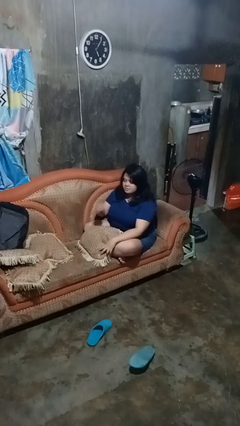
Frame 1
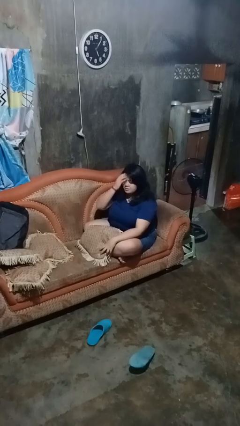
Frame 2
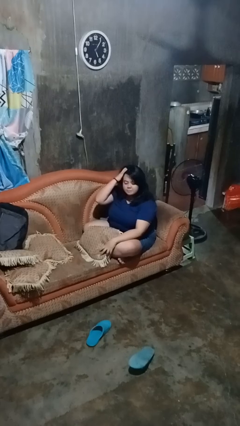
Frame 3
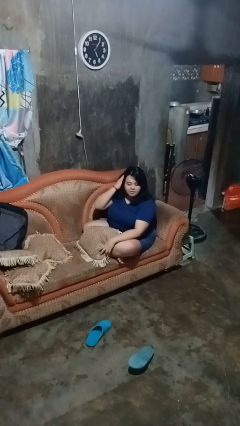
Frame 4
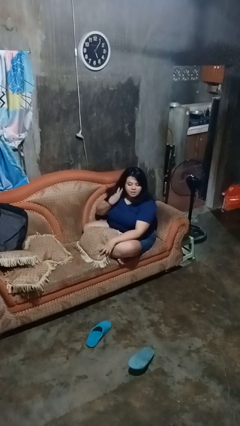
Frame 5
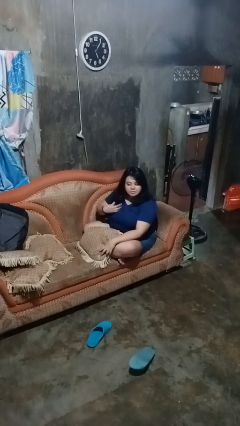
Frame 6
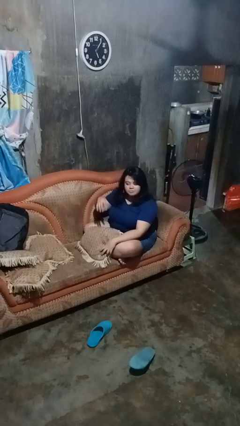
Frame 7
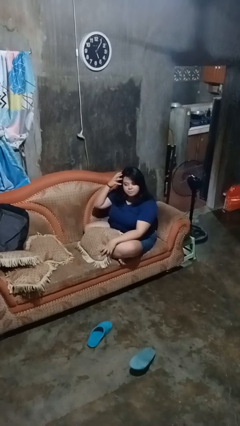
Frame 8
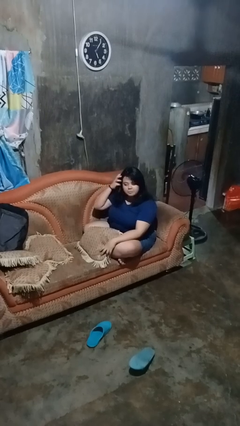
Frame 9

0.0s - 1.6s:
person strokes hair

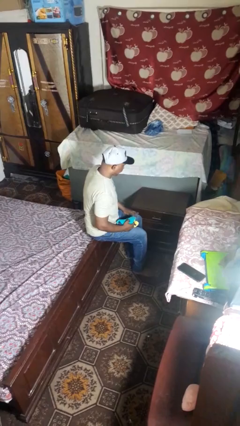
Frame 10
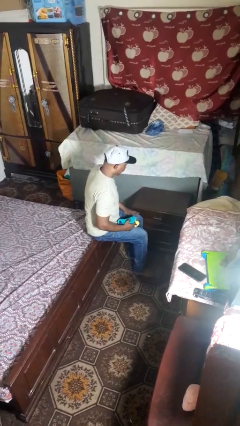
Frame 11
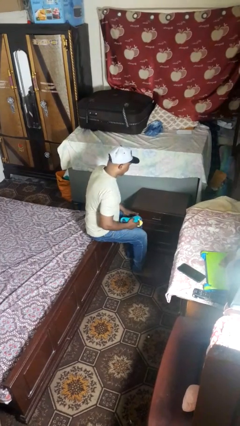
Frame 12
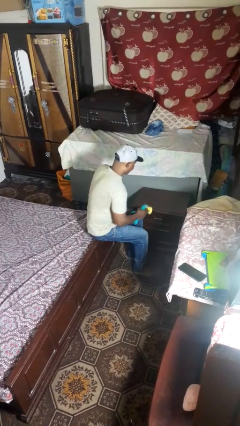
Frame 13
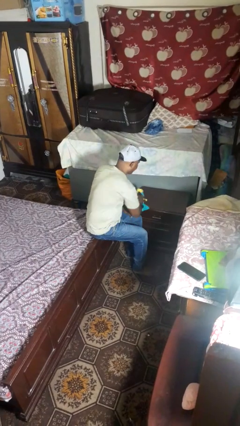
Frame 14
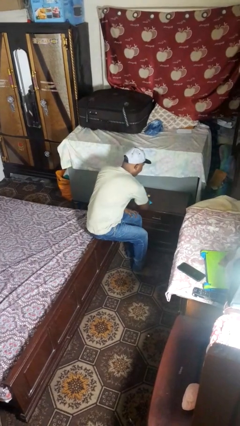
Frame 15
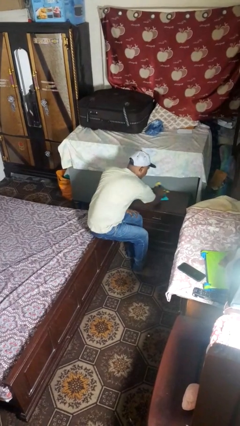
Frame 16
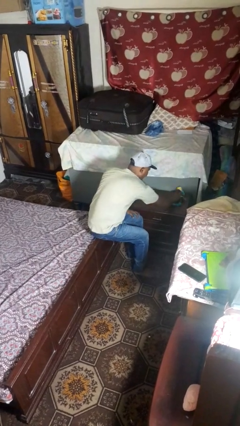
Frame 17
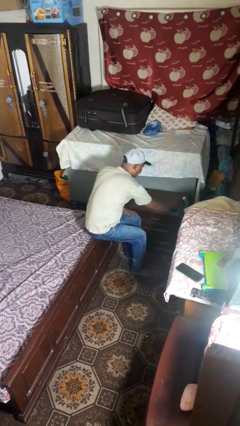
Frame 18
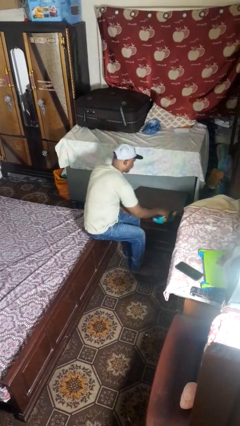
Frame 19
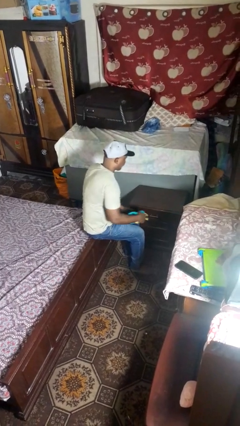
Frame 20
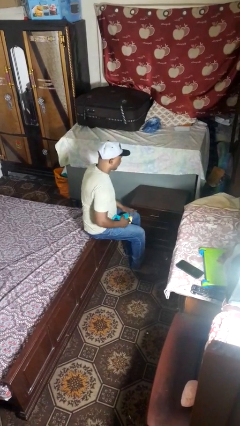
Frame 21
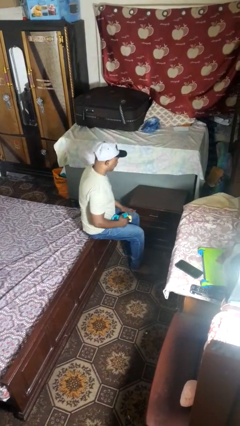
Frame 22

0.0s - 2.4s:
person cleans table with rag

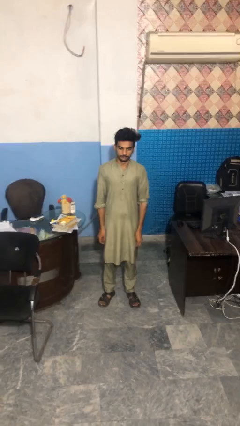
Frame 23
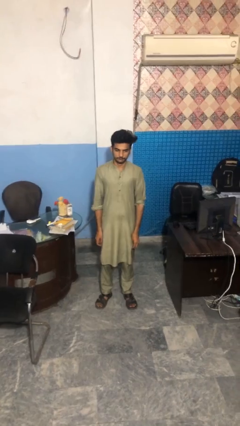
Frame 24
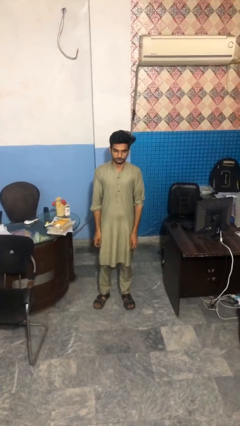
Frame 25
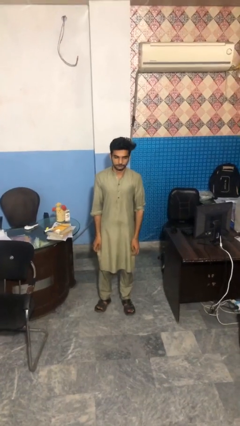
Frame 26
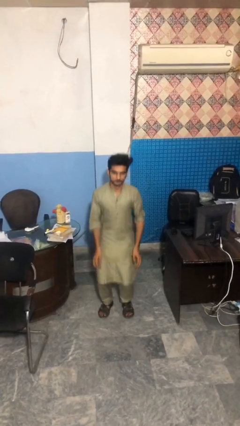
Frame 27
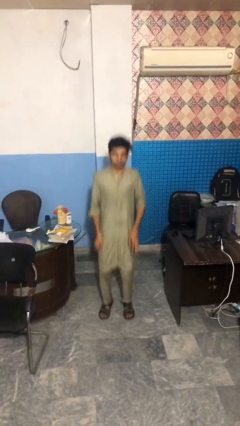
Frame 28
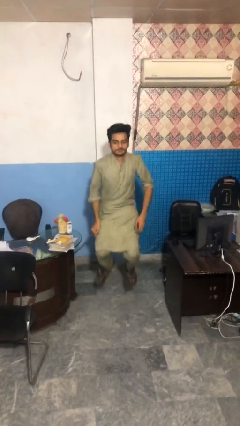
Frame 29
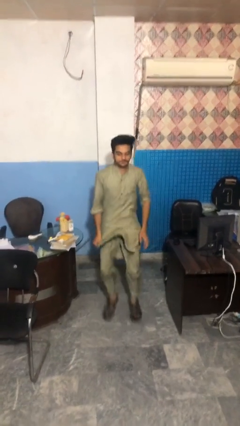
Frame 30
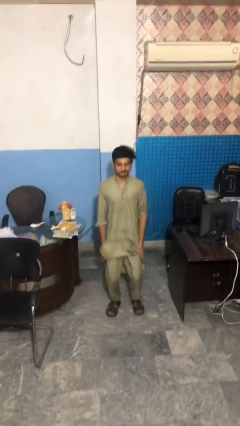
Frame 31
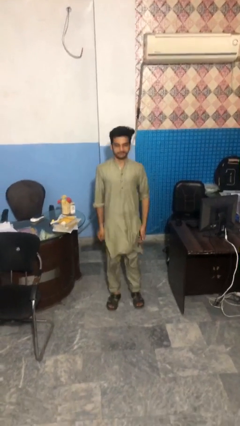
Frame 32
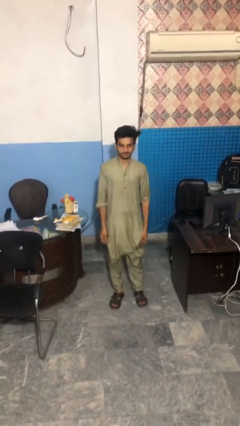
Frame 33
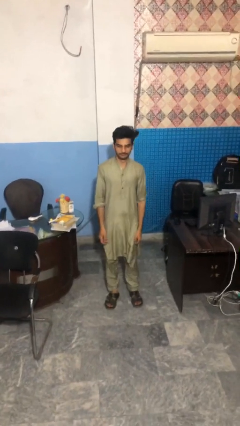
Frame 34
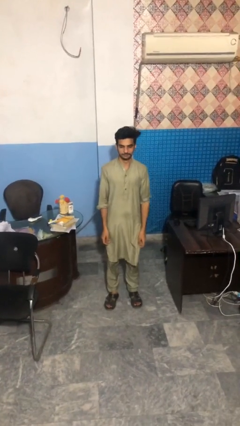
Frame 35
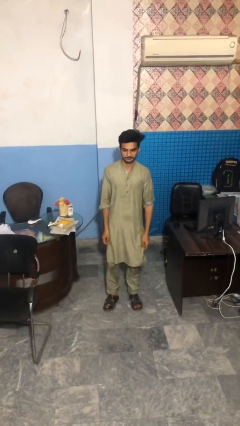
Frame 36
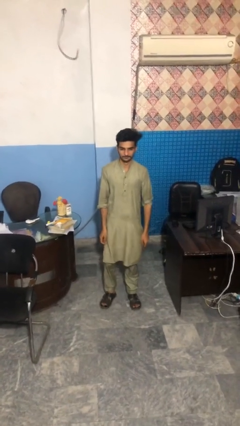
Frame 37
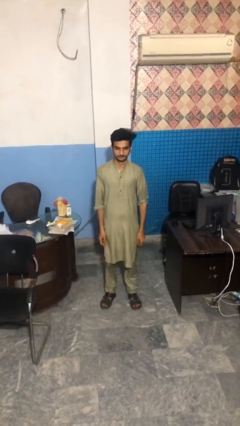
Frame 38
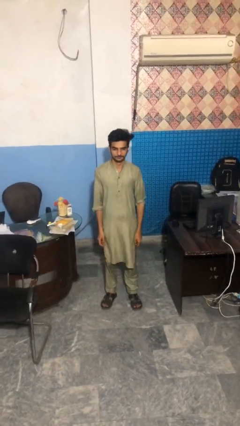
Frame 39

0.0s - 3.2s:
person jumps

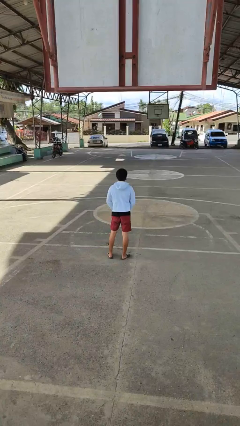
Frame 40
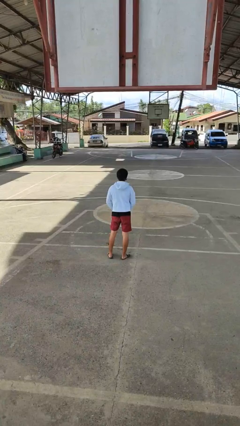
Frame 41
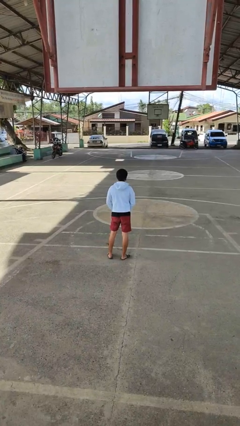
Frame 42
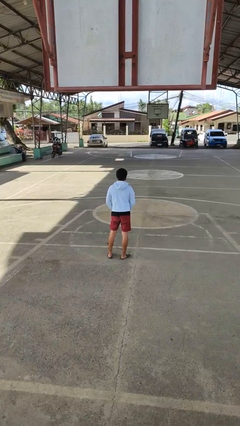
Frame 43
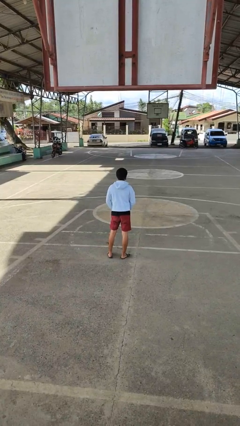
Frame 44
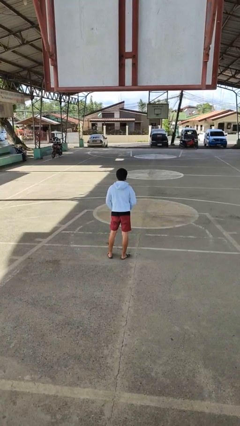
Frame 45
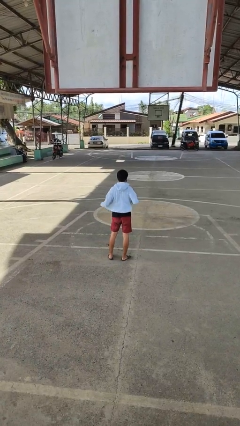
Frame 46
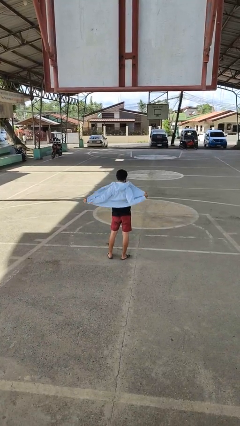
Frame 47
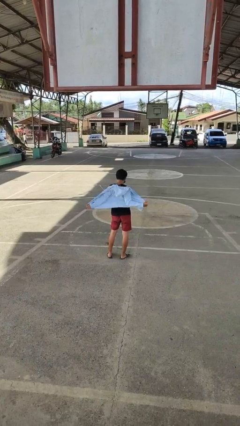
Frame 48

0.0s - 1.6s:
person unzips jacket

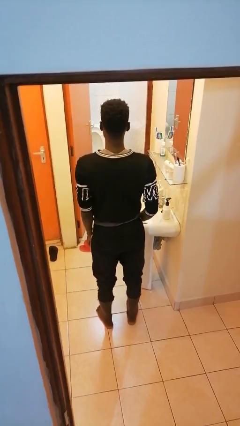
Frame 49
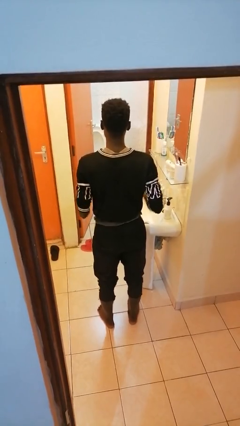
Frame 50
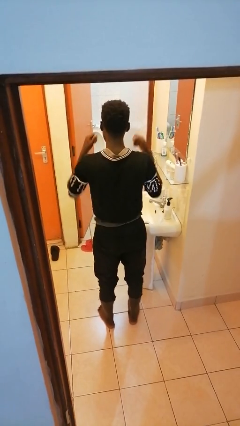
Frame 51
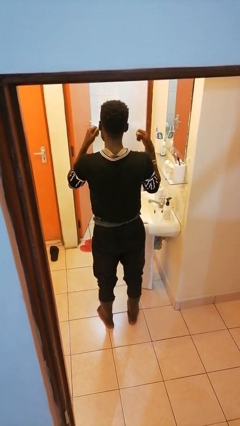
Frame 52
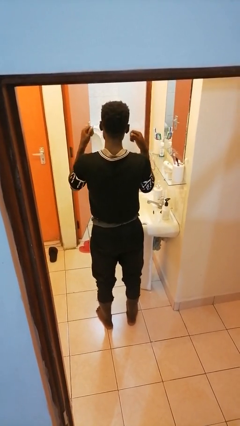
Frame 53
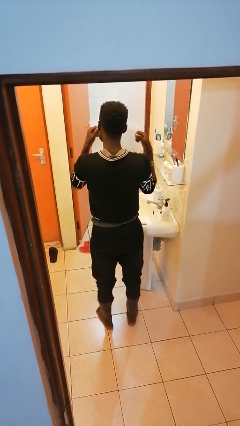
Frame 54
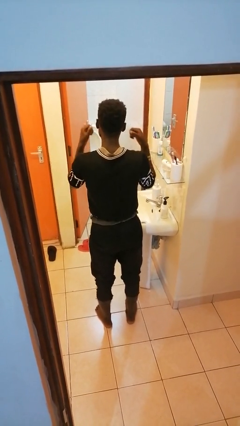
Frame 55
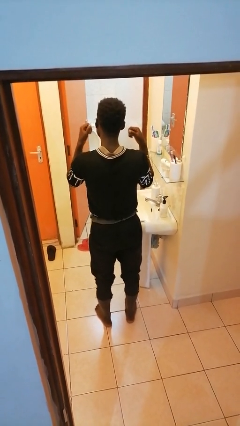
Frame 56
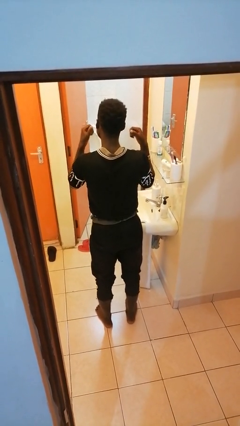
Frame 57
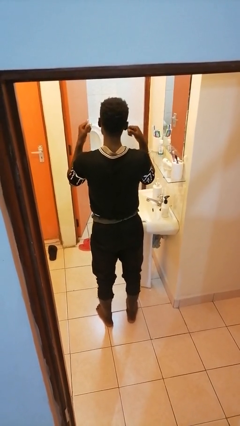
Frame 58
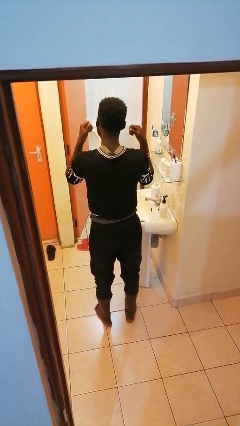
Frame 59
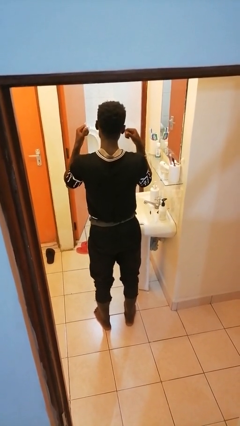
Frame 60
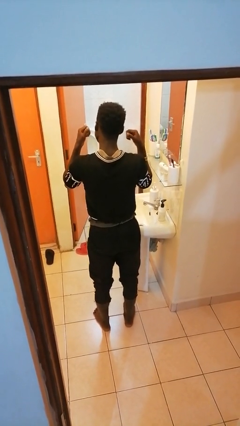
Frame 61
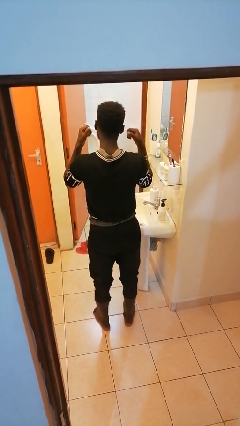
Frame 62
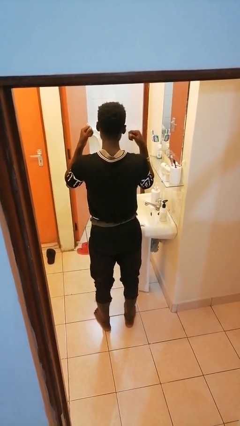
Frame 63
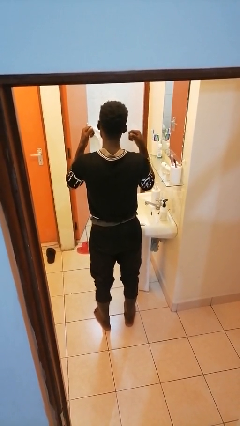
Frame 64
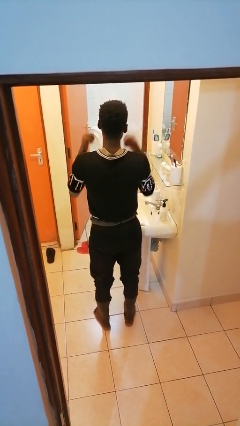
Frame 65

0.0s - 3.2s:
person flosses

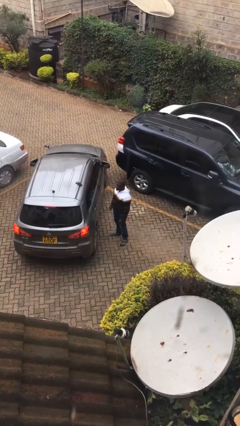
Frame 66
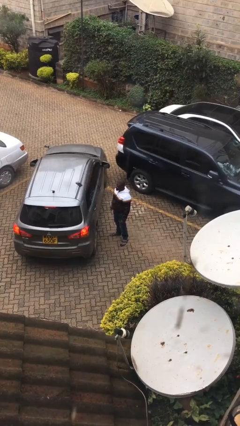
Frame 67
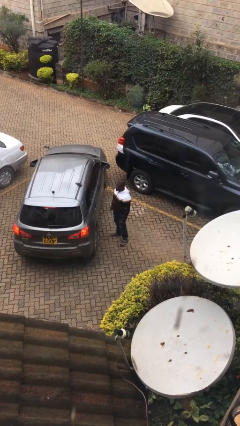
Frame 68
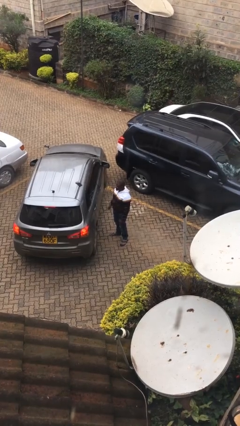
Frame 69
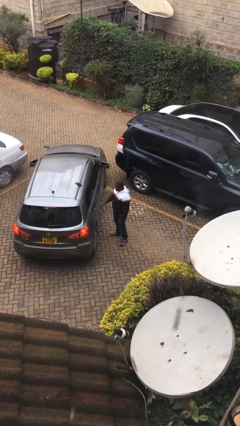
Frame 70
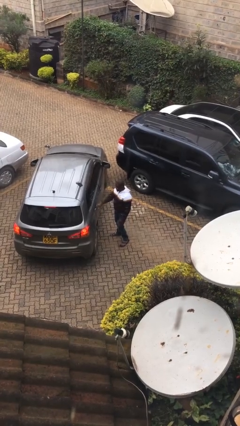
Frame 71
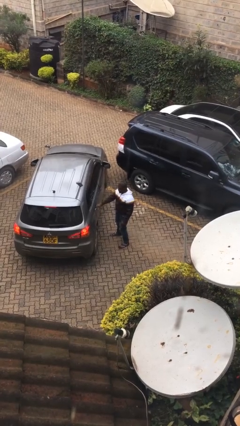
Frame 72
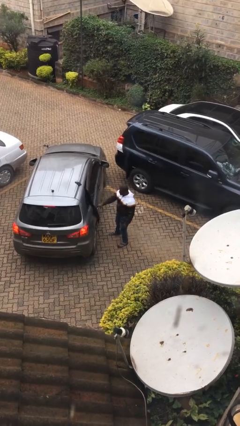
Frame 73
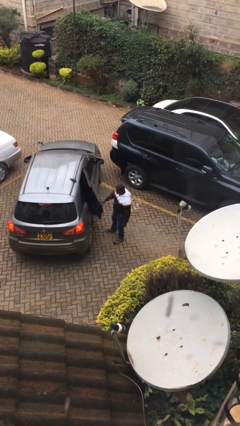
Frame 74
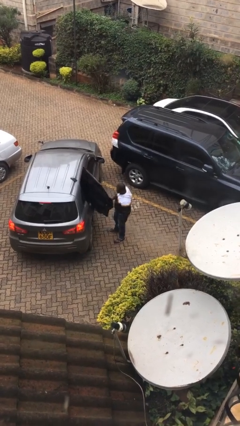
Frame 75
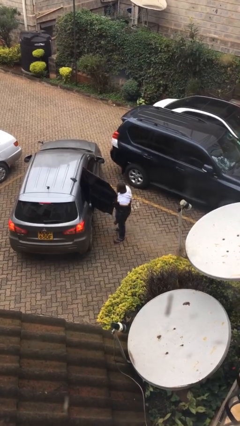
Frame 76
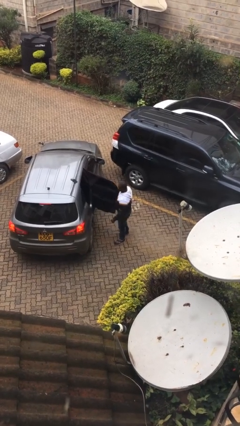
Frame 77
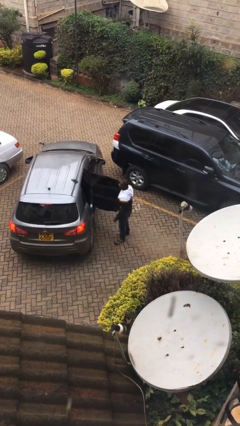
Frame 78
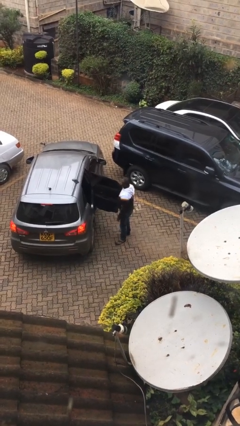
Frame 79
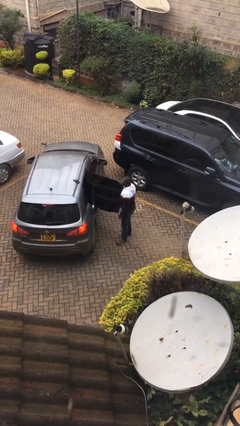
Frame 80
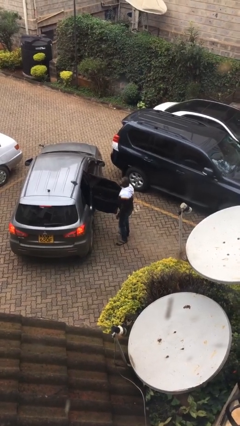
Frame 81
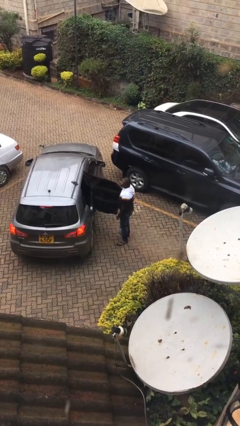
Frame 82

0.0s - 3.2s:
person opens car door

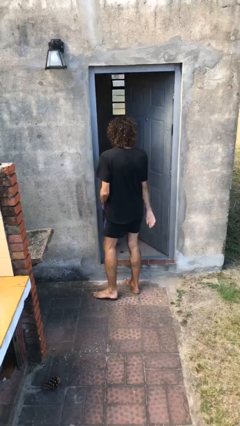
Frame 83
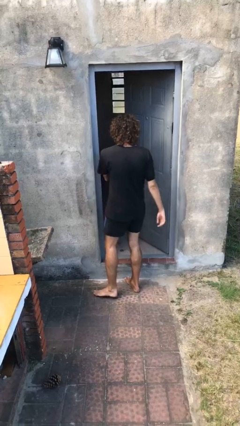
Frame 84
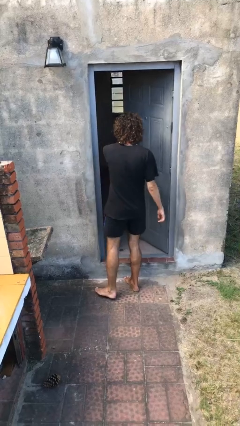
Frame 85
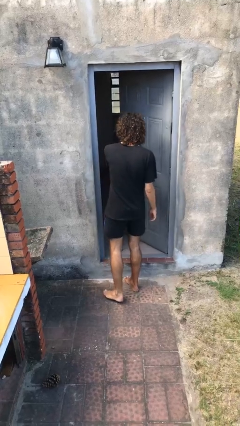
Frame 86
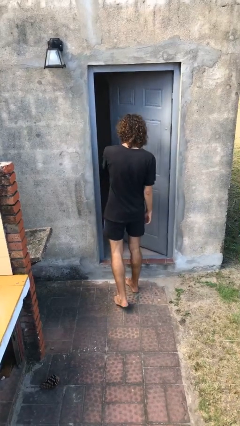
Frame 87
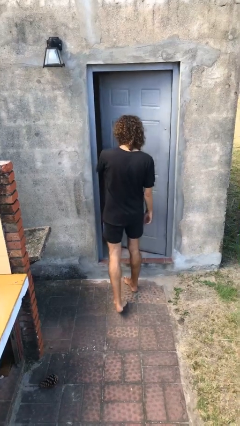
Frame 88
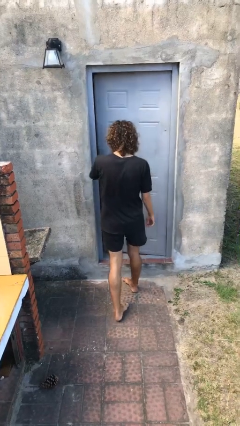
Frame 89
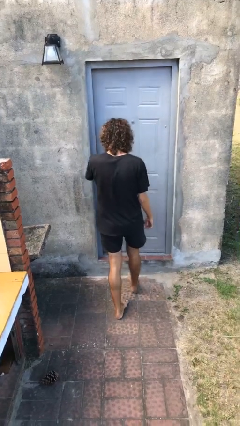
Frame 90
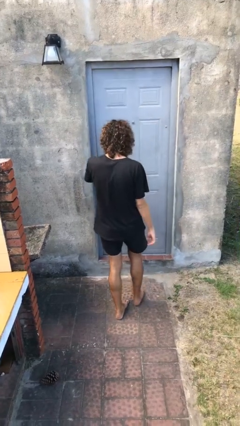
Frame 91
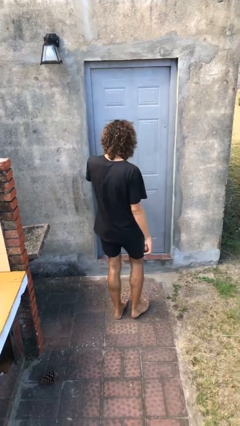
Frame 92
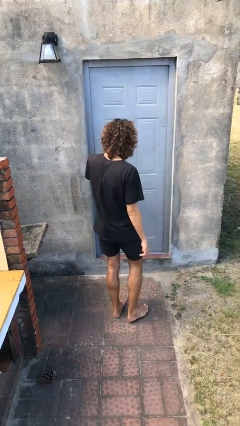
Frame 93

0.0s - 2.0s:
person closes facility door

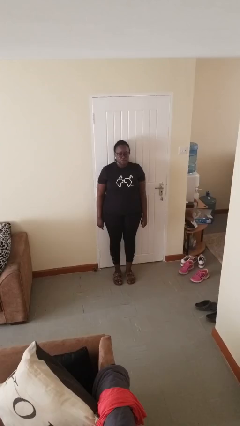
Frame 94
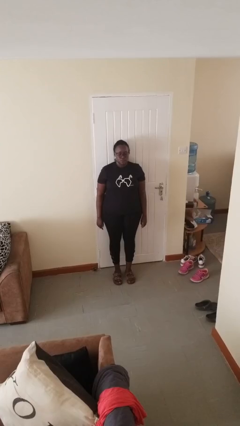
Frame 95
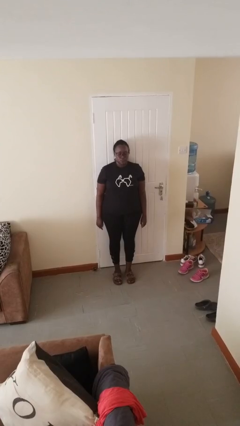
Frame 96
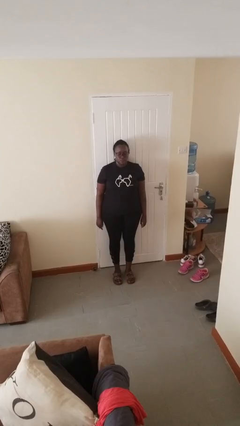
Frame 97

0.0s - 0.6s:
person gestures number four
